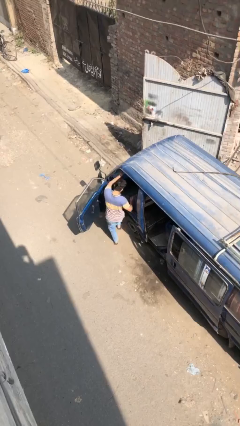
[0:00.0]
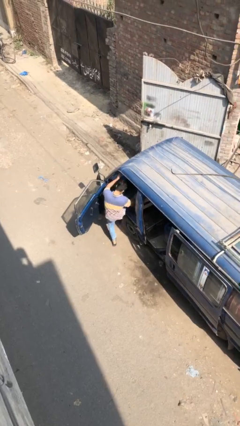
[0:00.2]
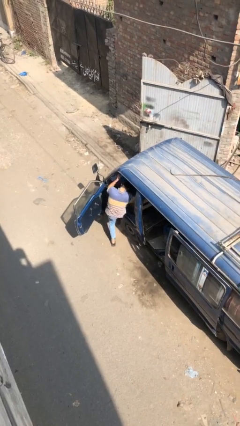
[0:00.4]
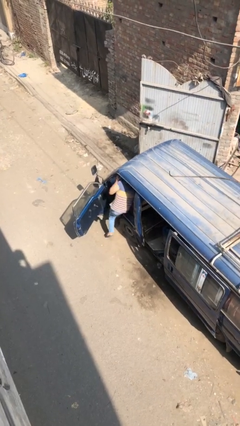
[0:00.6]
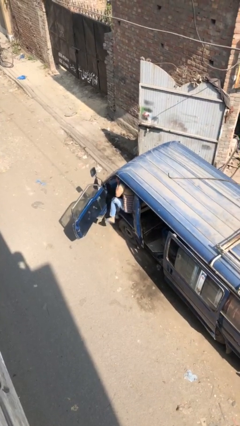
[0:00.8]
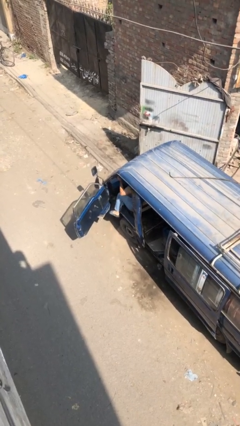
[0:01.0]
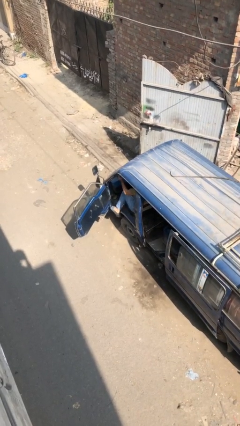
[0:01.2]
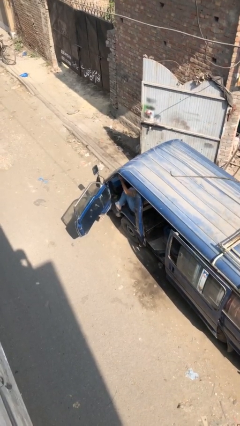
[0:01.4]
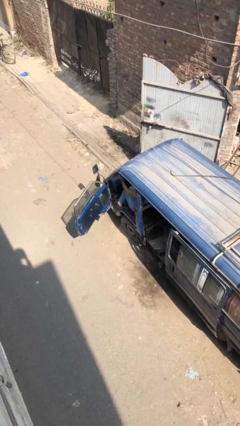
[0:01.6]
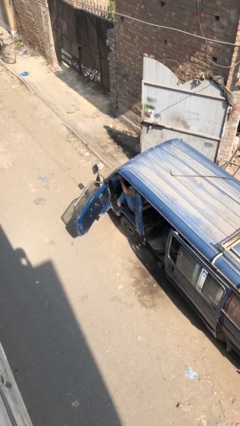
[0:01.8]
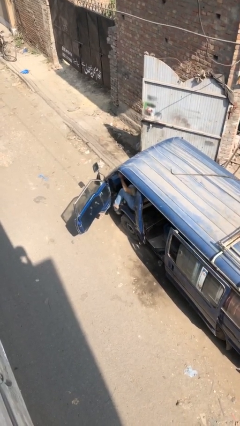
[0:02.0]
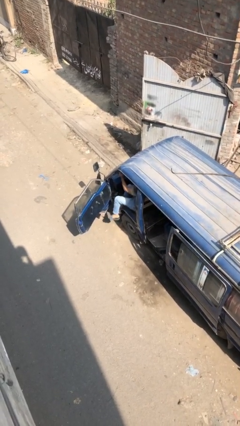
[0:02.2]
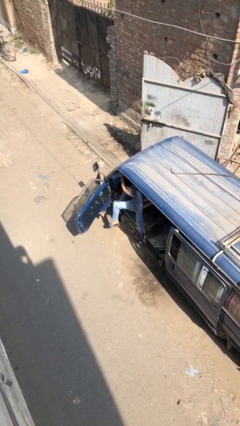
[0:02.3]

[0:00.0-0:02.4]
person enters car

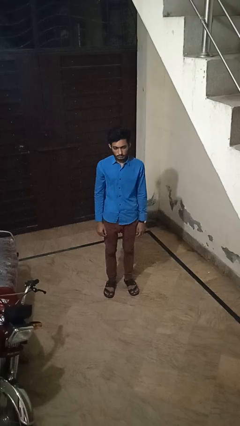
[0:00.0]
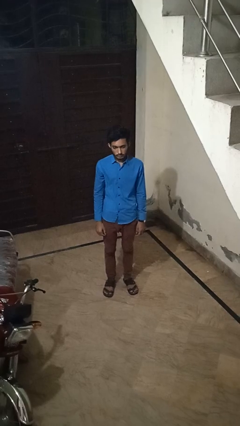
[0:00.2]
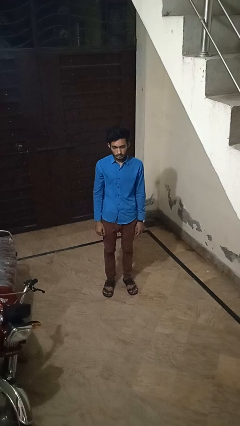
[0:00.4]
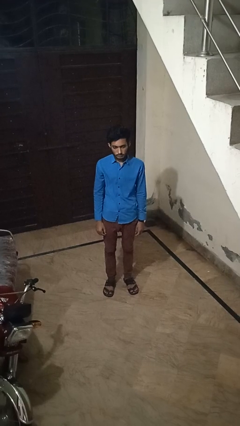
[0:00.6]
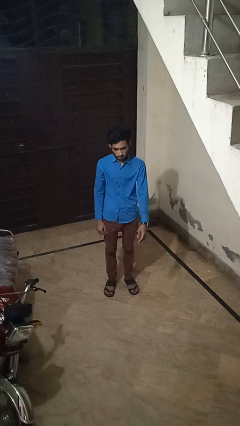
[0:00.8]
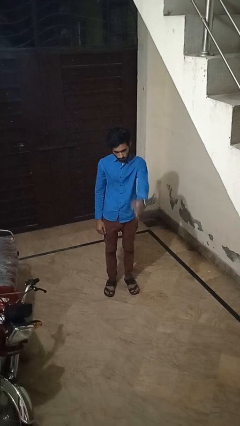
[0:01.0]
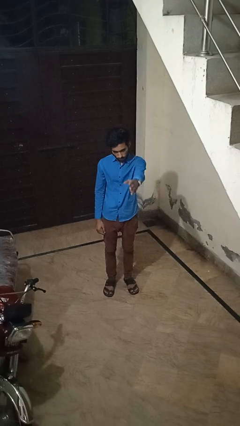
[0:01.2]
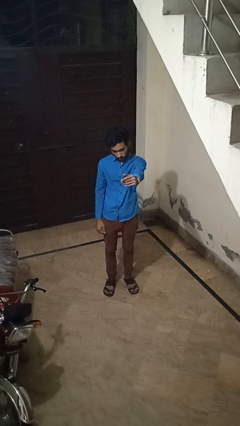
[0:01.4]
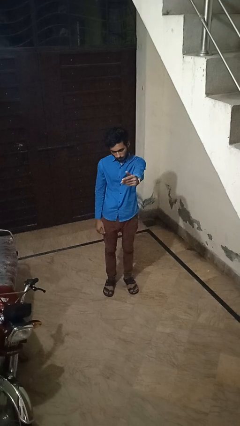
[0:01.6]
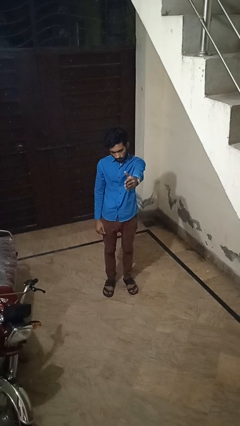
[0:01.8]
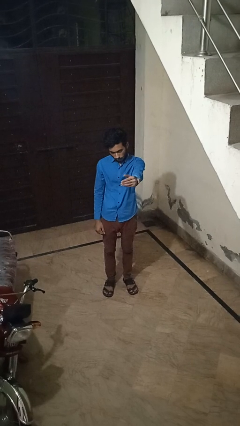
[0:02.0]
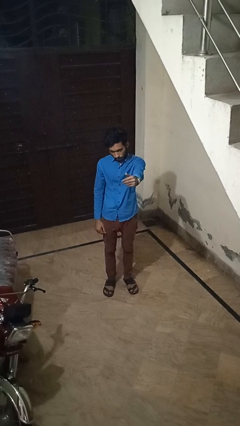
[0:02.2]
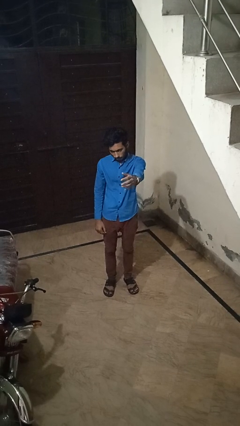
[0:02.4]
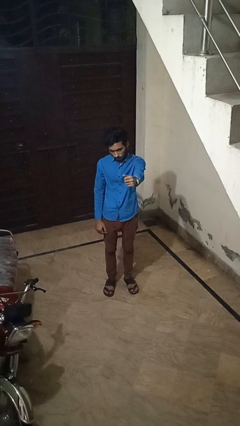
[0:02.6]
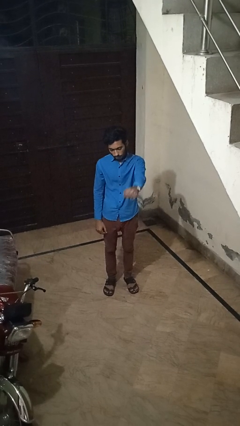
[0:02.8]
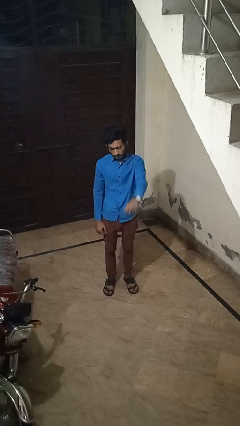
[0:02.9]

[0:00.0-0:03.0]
person gestures come here

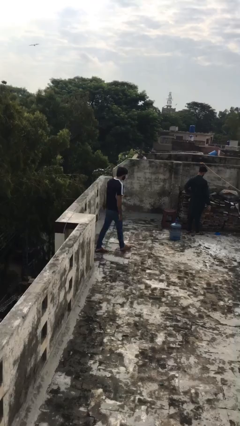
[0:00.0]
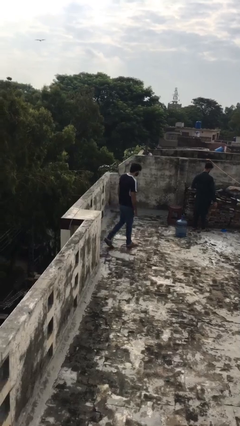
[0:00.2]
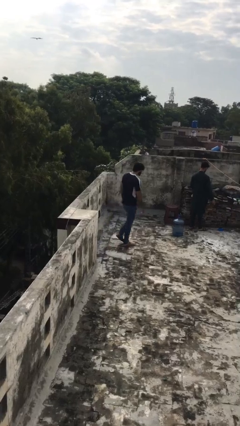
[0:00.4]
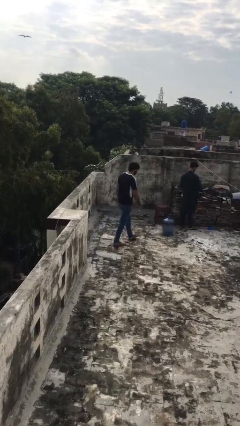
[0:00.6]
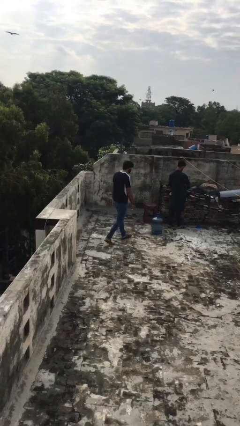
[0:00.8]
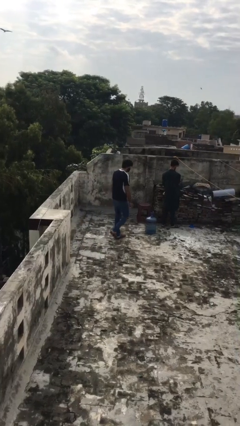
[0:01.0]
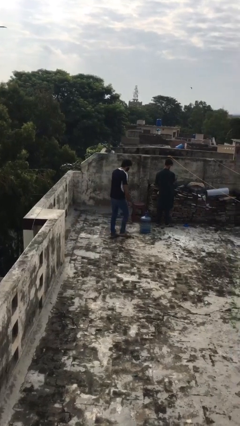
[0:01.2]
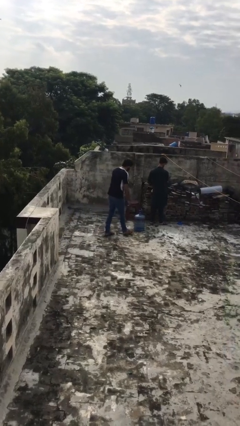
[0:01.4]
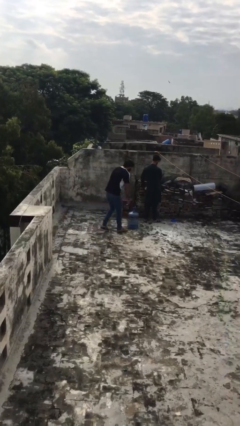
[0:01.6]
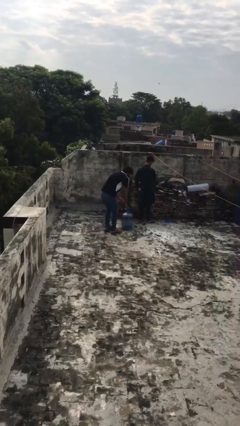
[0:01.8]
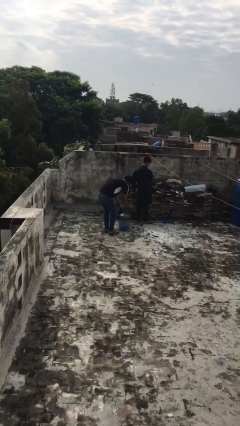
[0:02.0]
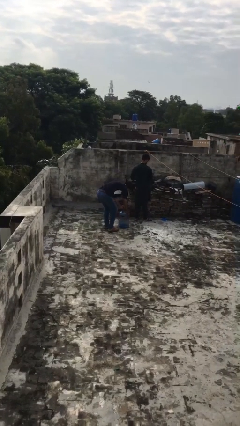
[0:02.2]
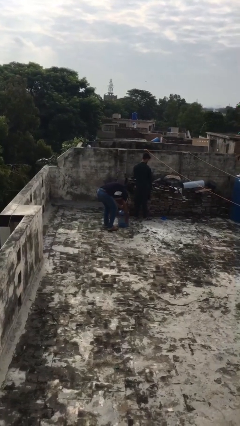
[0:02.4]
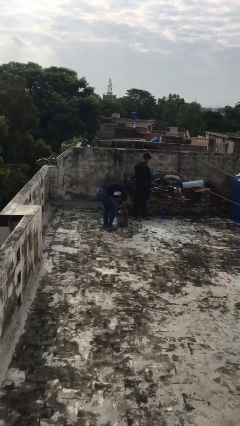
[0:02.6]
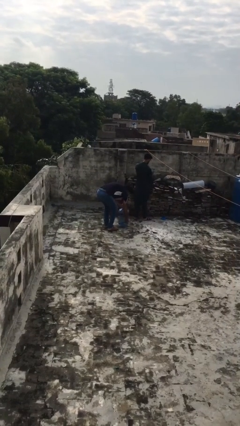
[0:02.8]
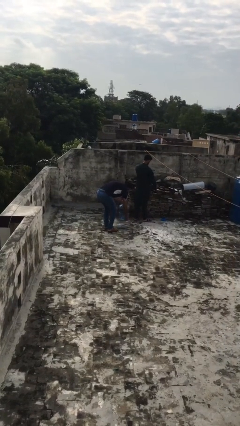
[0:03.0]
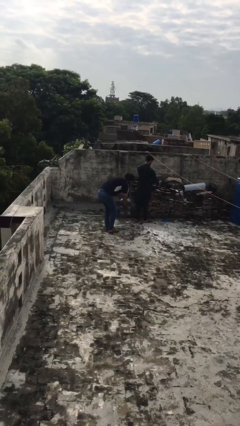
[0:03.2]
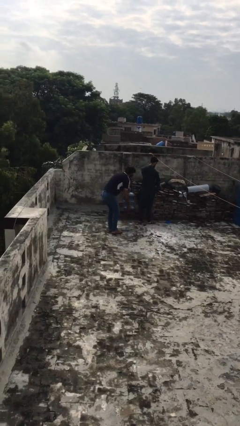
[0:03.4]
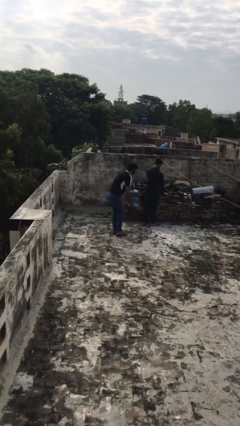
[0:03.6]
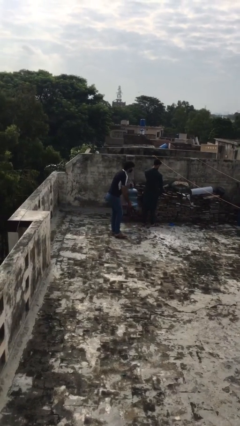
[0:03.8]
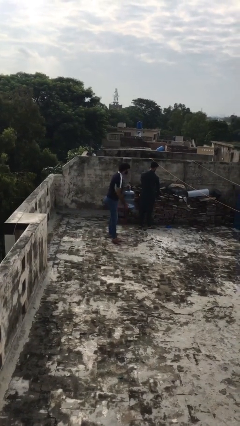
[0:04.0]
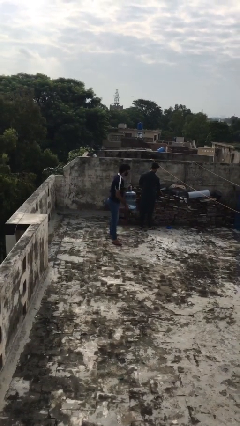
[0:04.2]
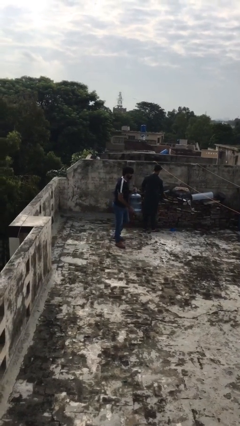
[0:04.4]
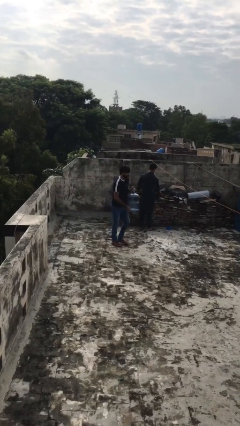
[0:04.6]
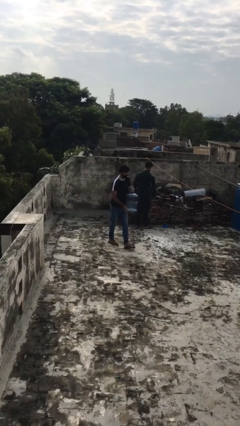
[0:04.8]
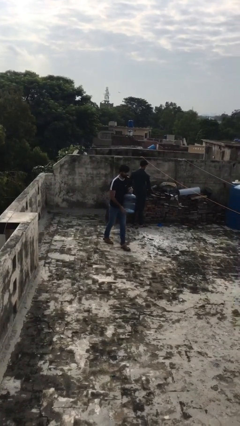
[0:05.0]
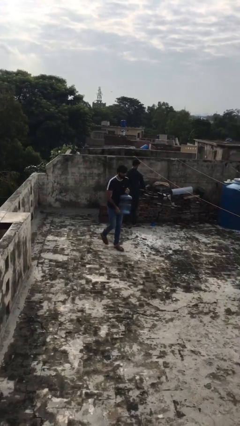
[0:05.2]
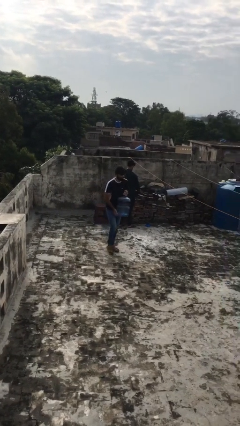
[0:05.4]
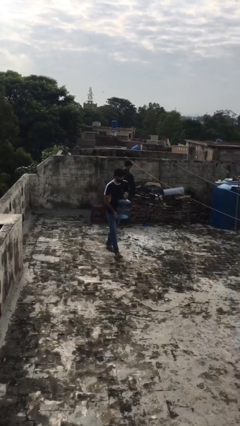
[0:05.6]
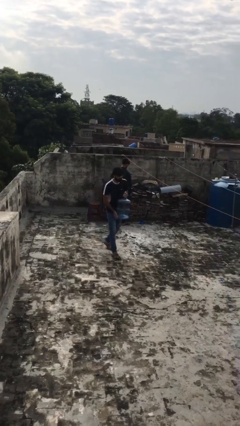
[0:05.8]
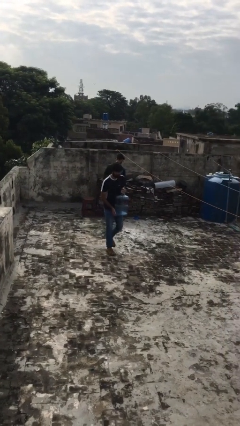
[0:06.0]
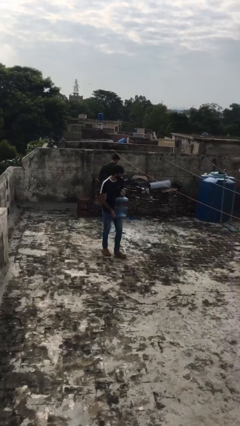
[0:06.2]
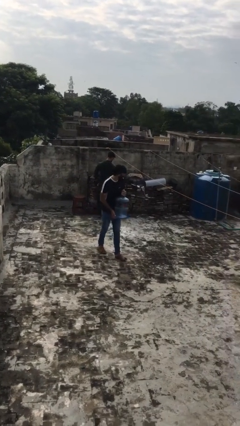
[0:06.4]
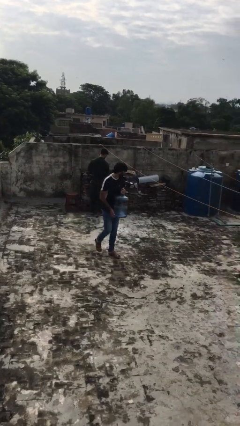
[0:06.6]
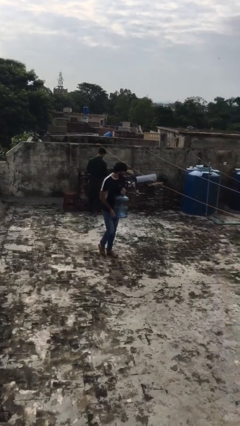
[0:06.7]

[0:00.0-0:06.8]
person steals object from person

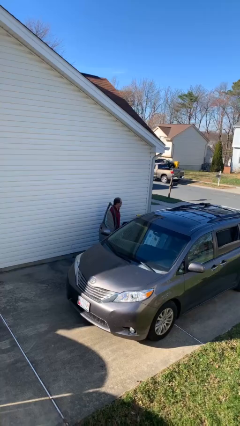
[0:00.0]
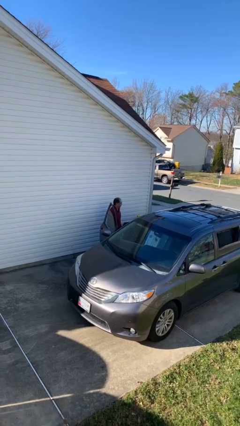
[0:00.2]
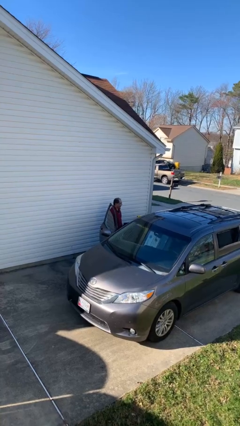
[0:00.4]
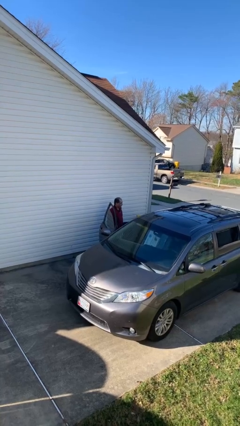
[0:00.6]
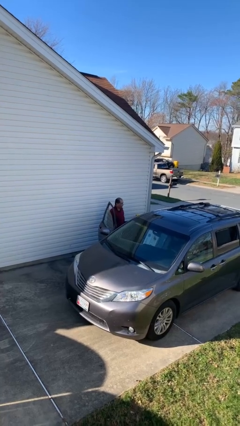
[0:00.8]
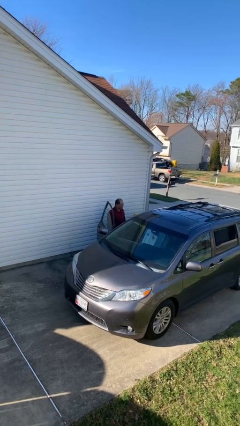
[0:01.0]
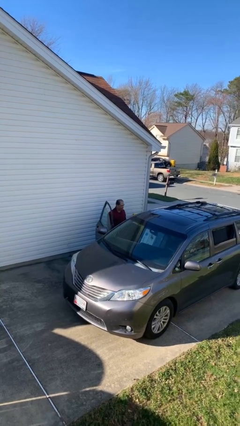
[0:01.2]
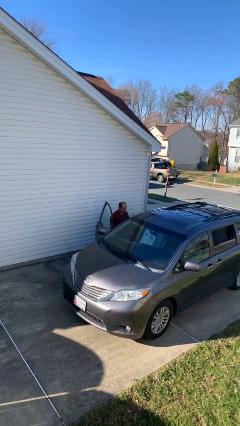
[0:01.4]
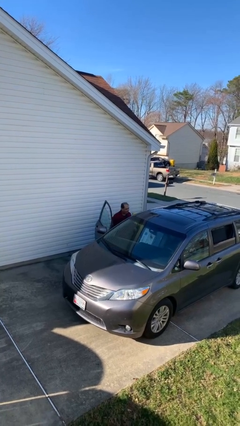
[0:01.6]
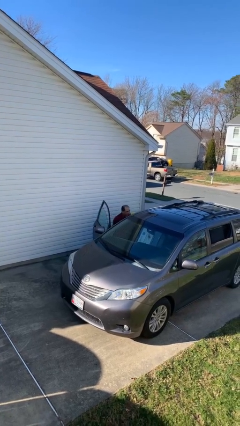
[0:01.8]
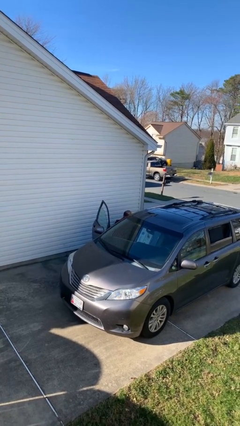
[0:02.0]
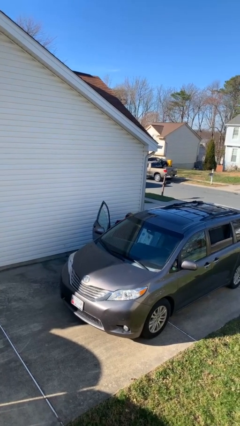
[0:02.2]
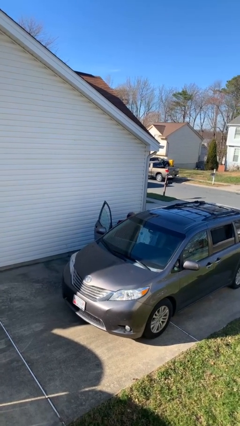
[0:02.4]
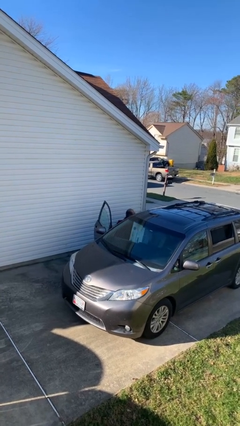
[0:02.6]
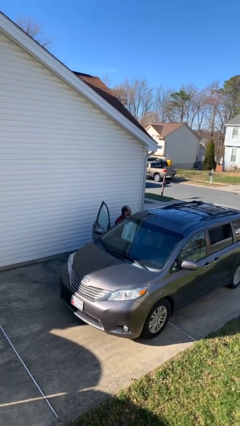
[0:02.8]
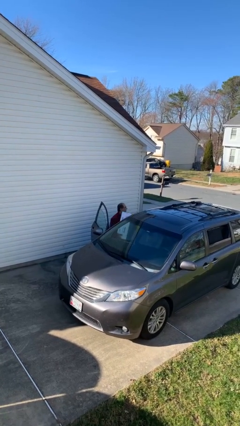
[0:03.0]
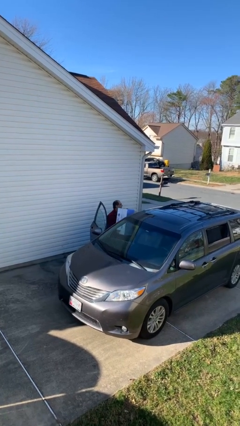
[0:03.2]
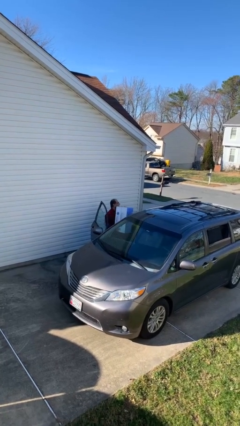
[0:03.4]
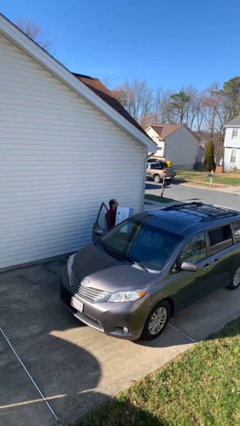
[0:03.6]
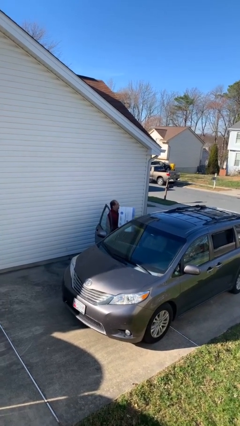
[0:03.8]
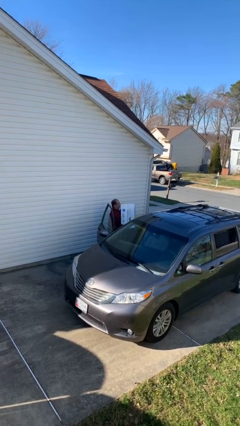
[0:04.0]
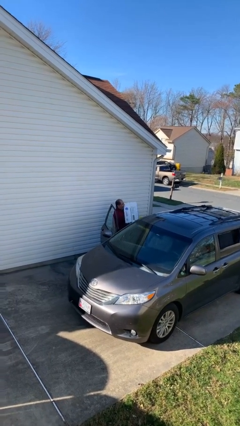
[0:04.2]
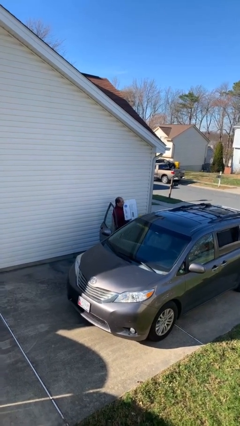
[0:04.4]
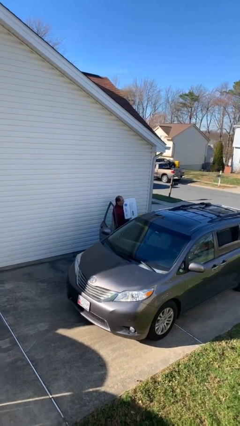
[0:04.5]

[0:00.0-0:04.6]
person unloads car

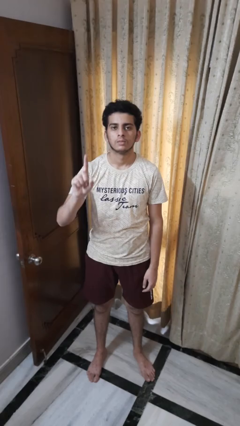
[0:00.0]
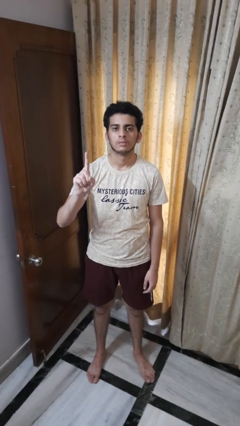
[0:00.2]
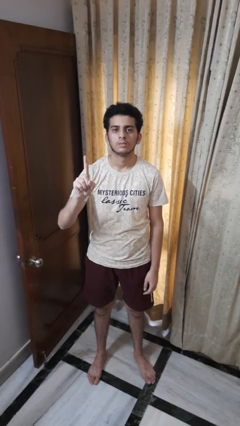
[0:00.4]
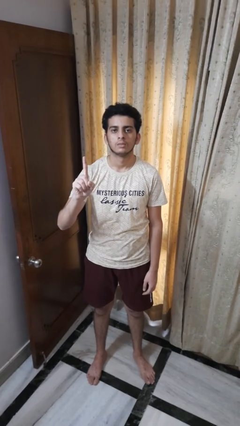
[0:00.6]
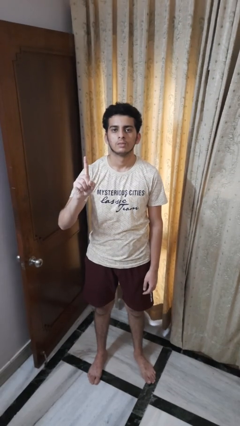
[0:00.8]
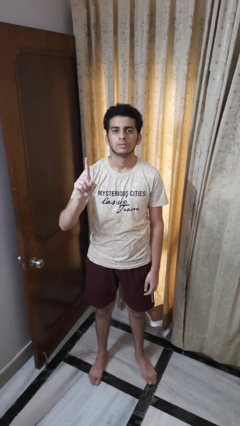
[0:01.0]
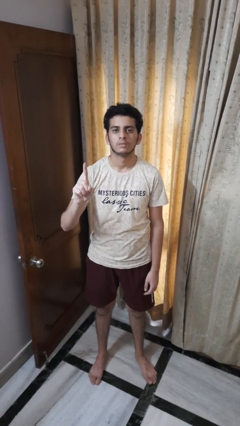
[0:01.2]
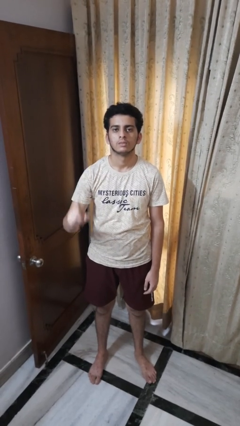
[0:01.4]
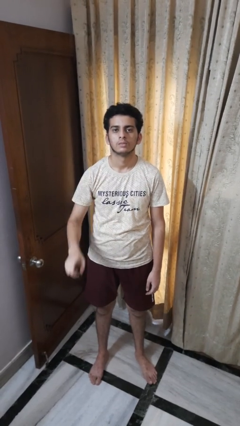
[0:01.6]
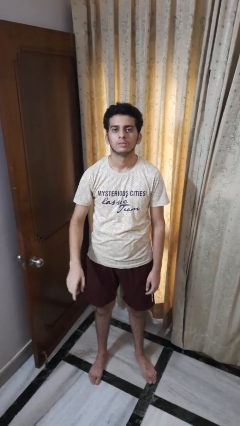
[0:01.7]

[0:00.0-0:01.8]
person gestures number one
